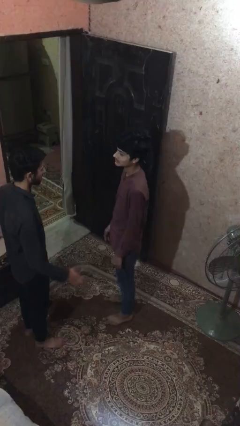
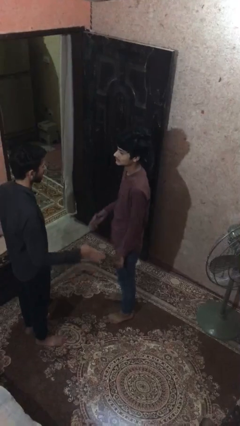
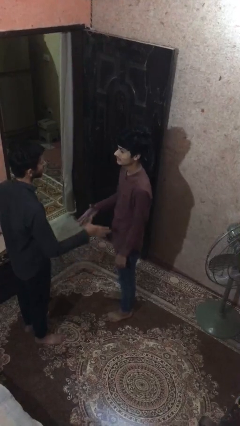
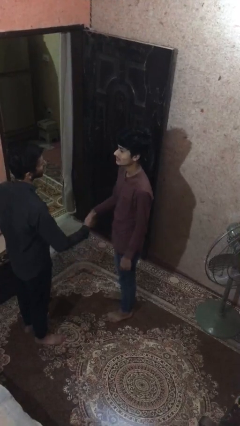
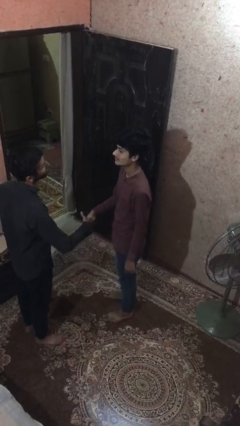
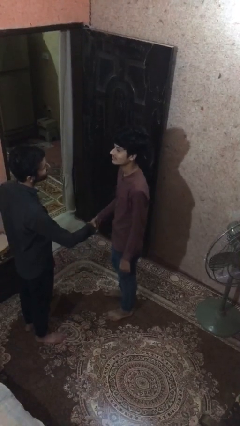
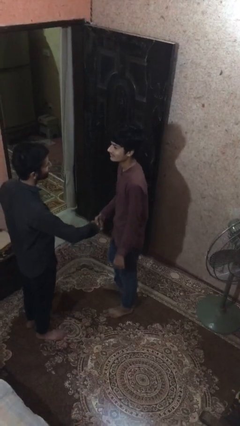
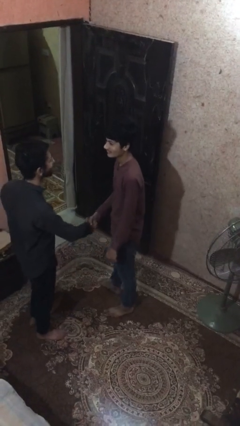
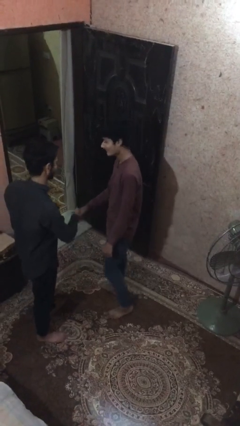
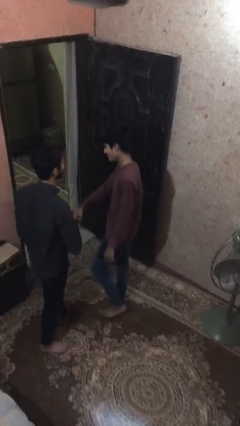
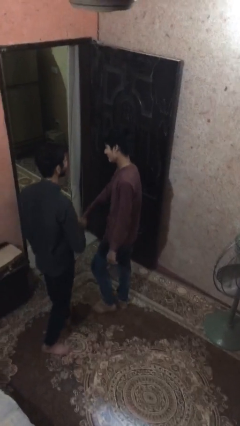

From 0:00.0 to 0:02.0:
person shakes hand

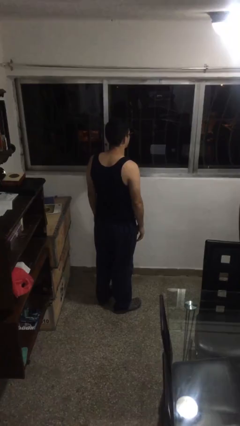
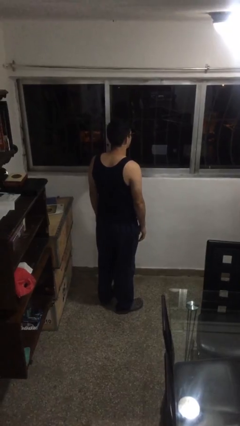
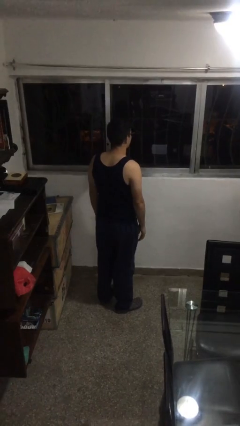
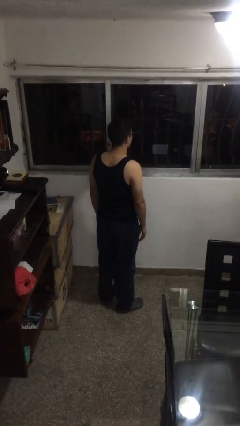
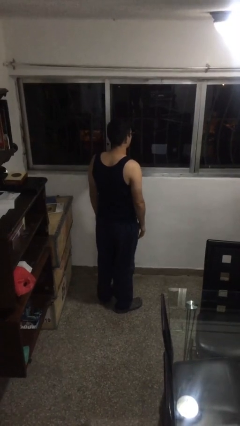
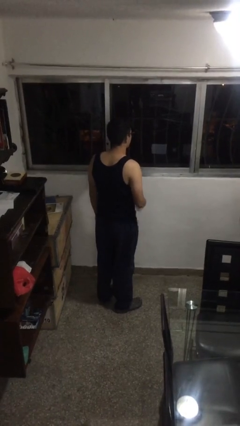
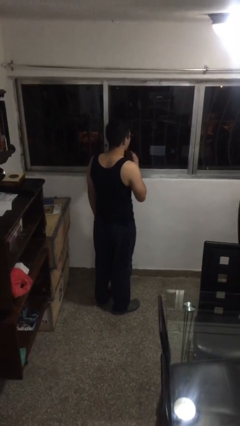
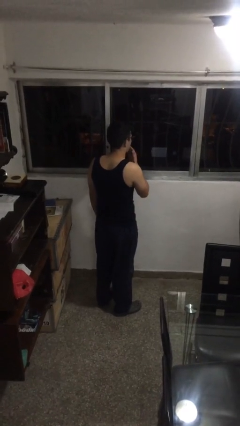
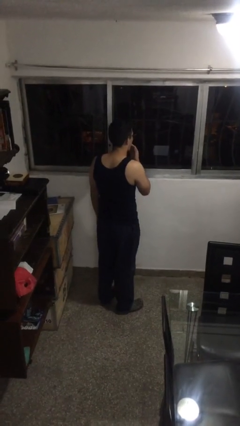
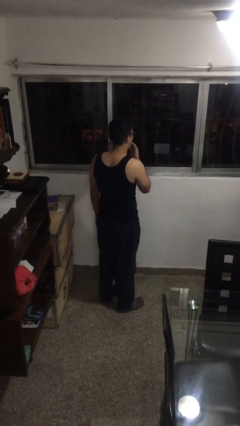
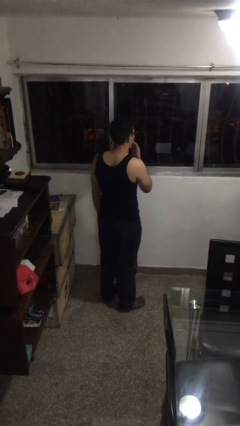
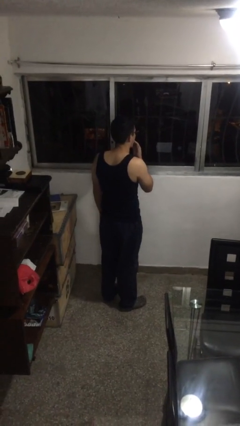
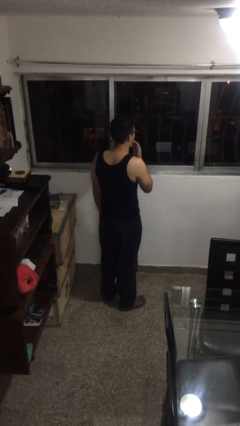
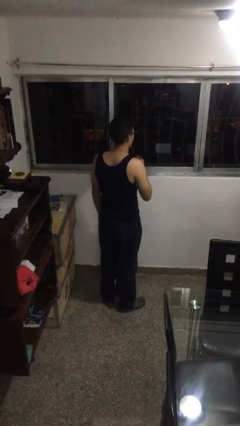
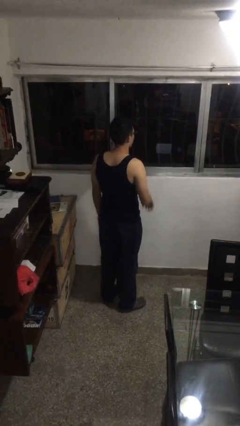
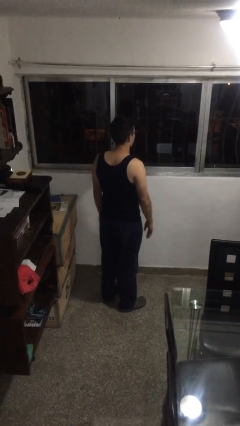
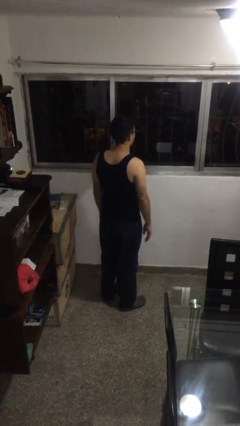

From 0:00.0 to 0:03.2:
person licks fingers

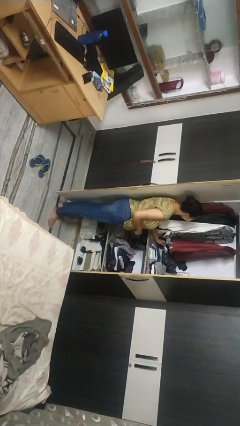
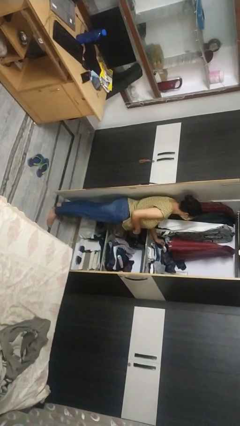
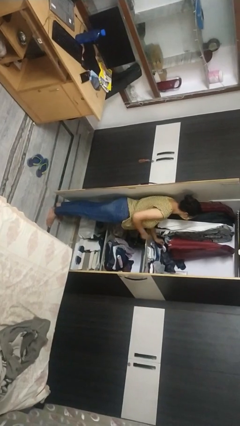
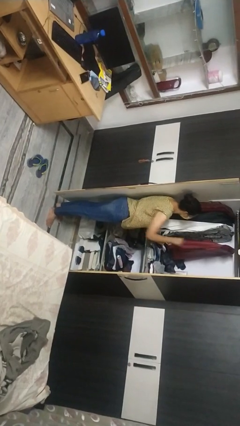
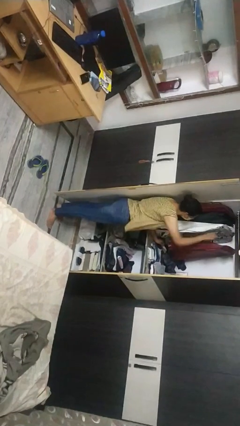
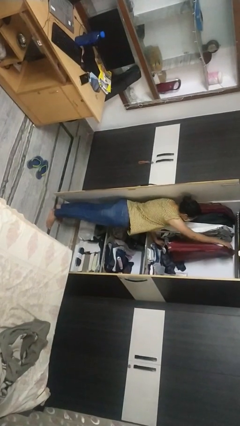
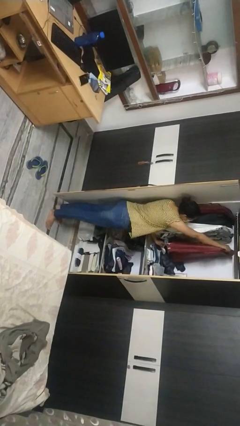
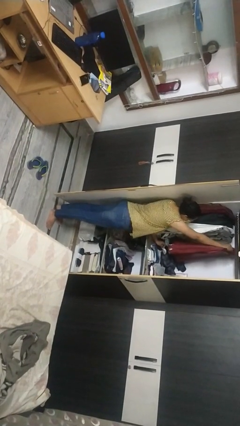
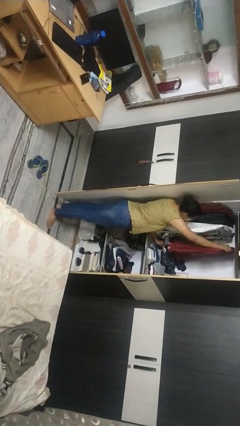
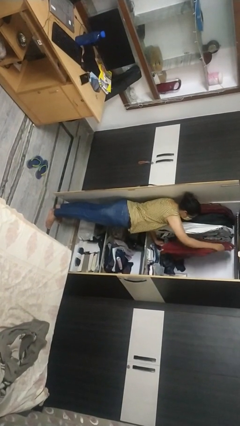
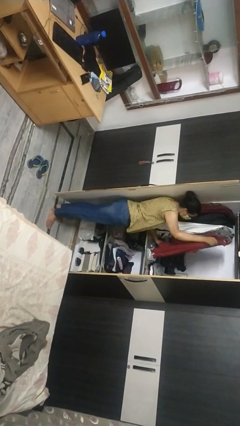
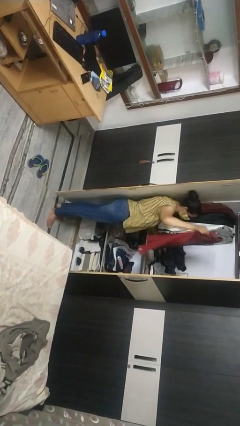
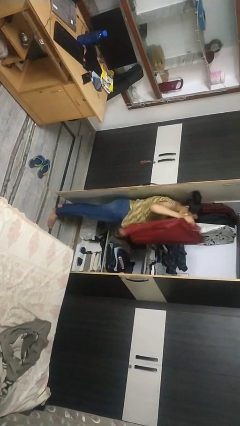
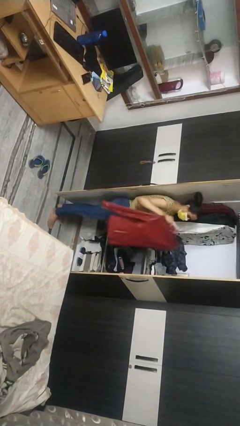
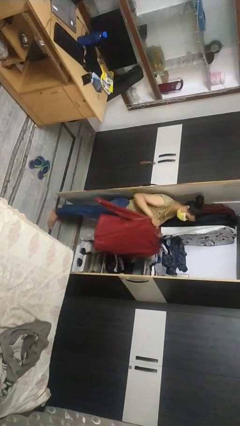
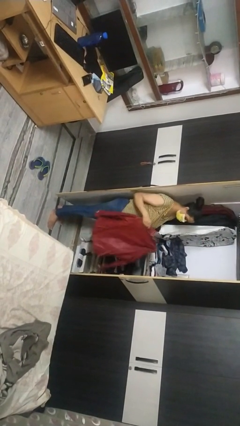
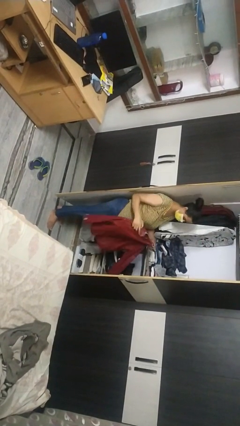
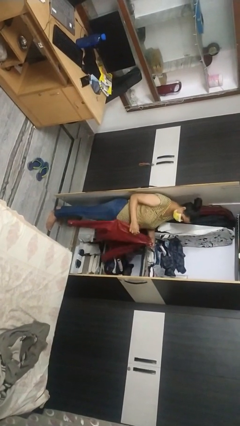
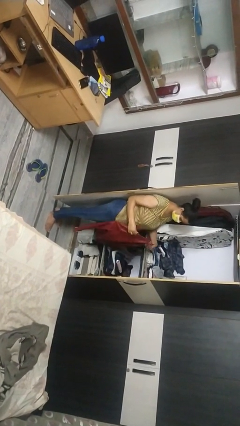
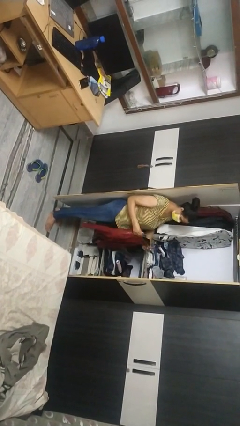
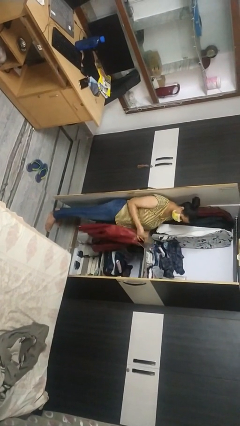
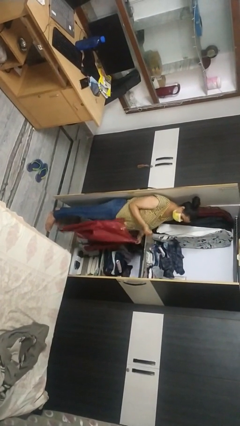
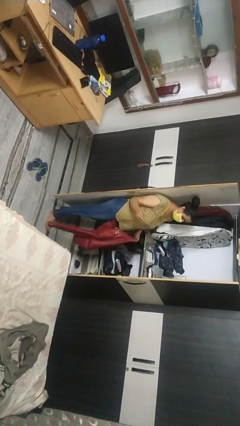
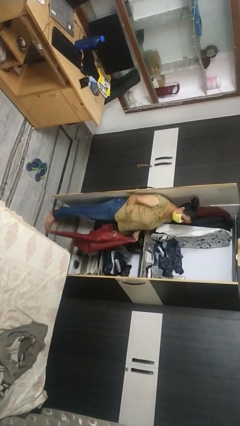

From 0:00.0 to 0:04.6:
person takes clothes from closet

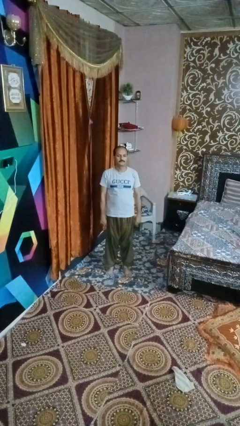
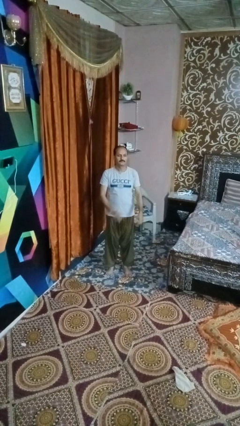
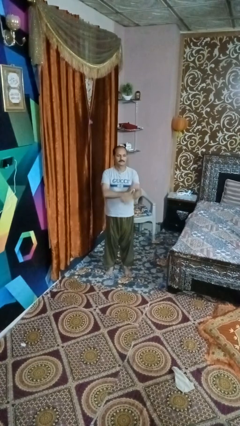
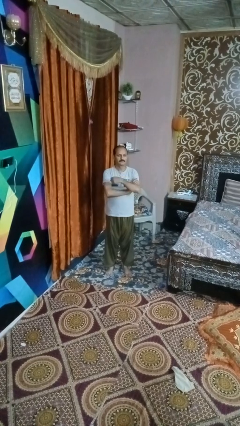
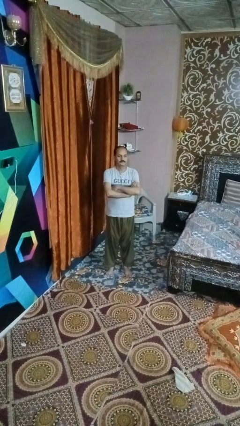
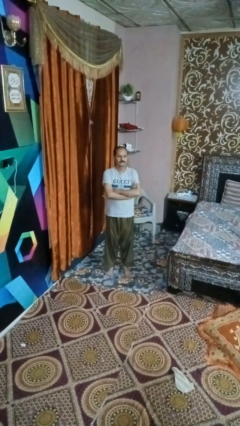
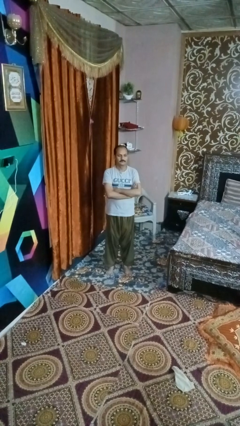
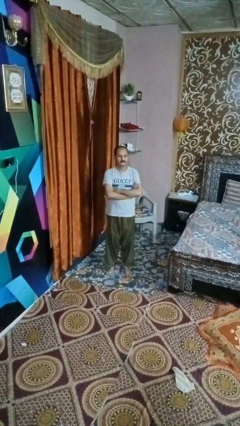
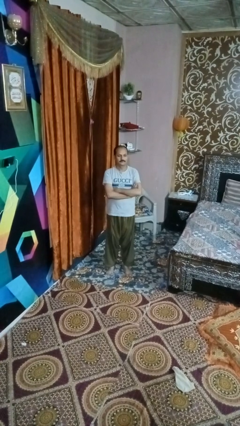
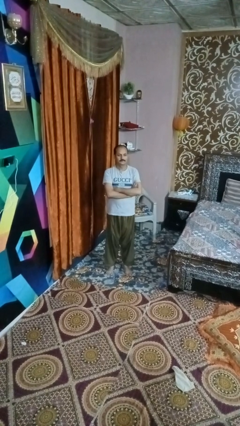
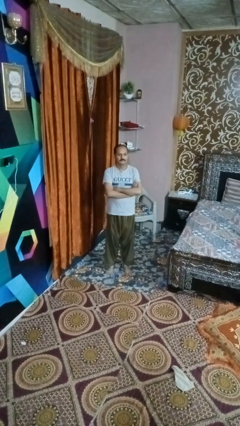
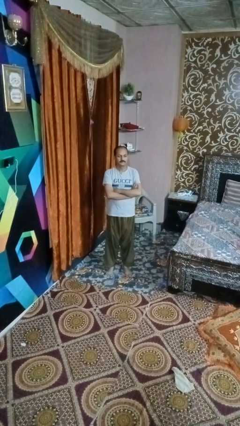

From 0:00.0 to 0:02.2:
person crosses arms

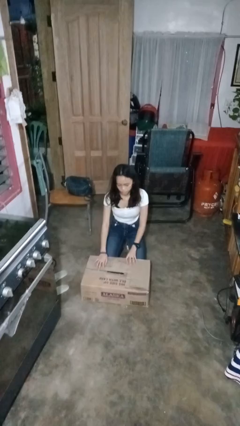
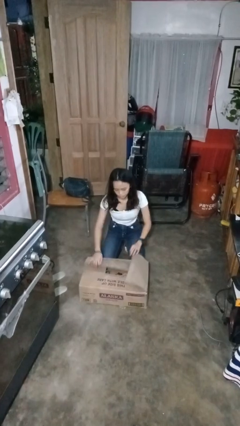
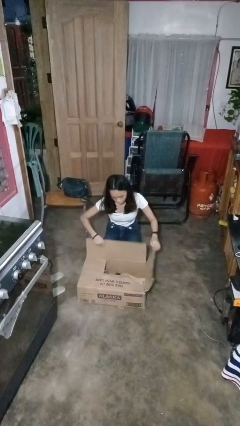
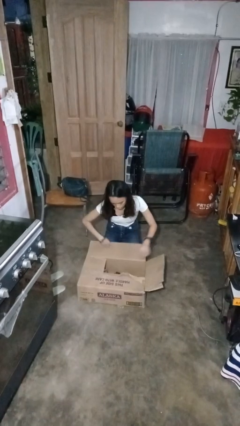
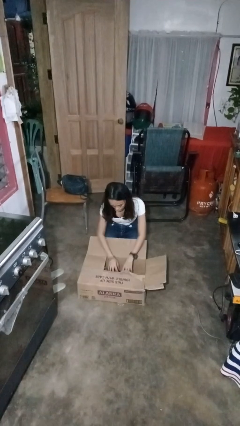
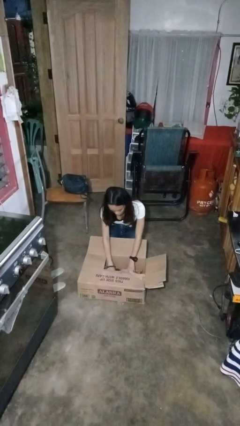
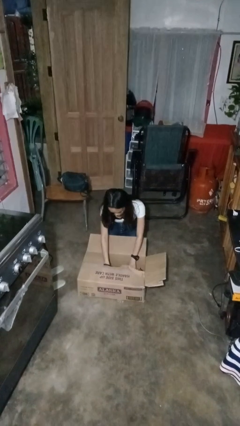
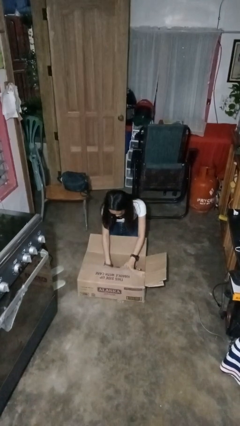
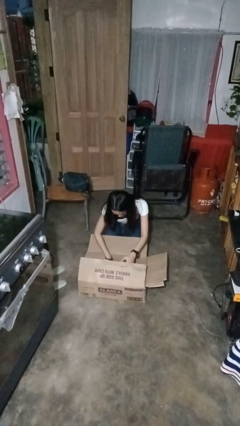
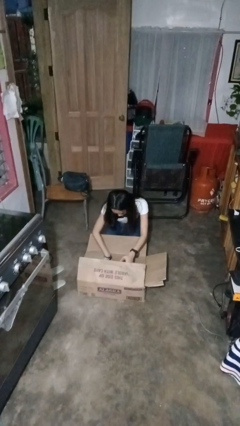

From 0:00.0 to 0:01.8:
person searches in box

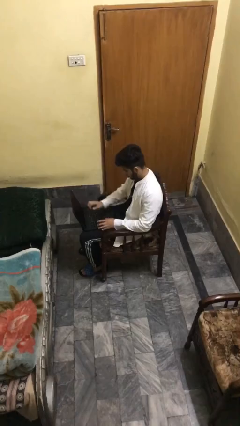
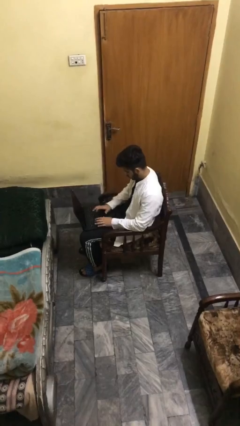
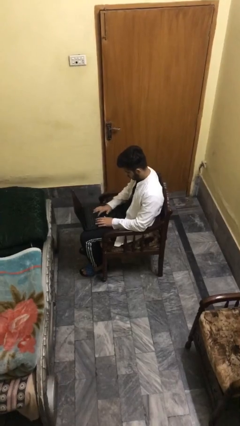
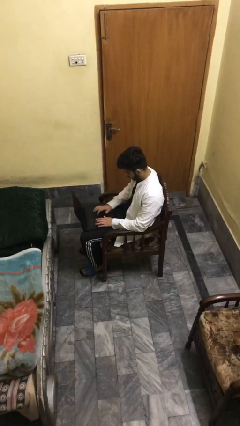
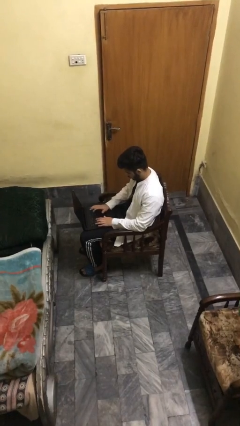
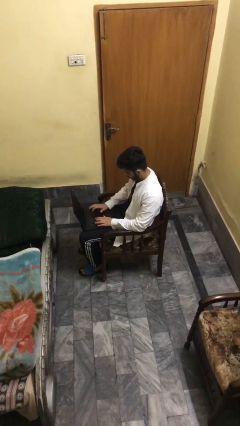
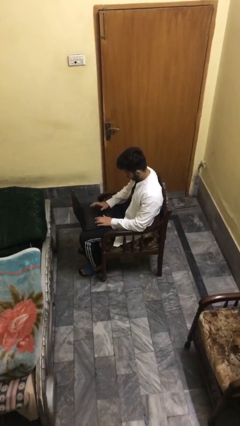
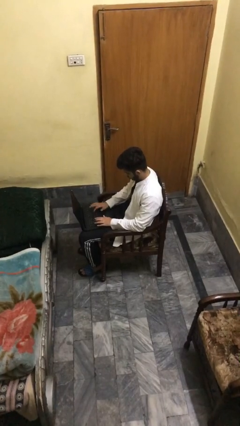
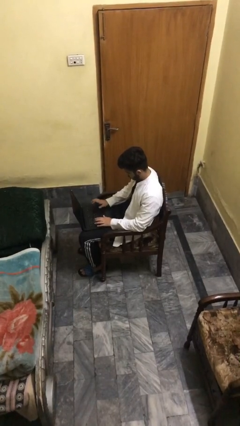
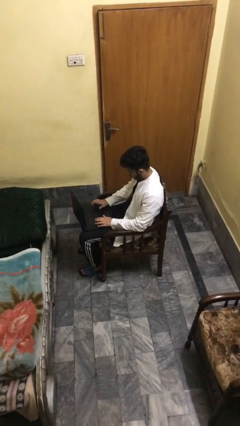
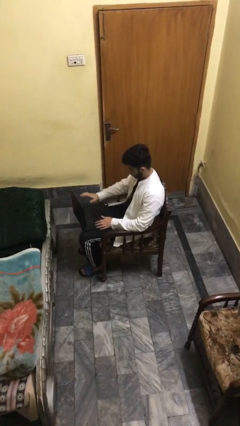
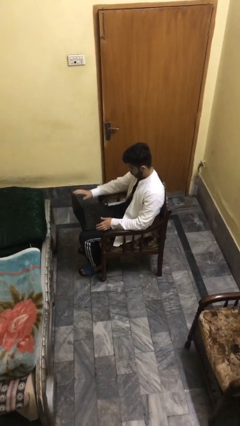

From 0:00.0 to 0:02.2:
person interacts with laptop

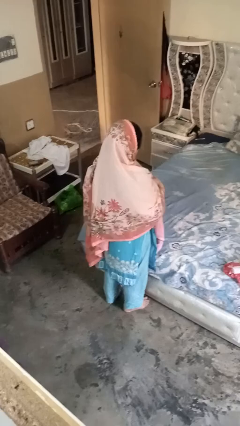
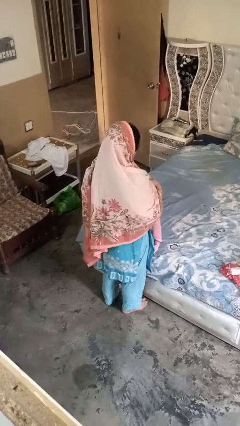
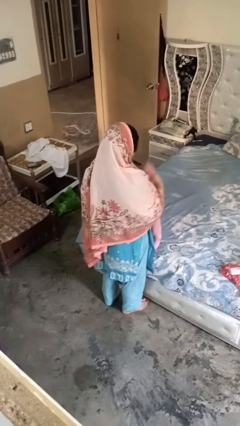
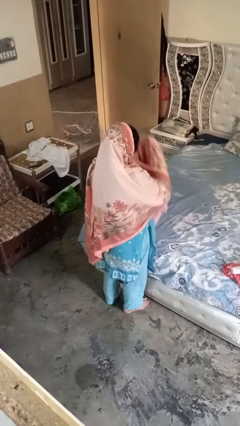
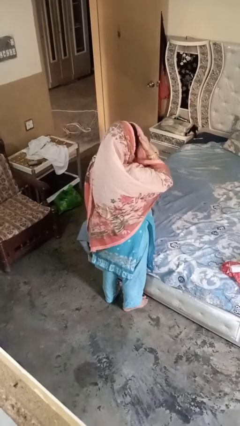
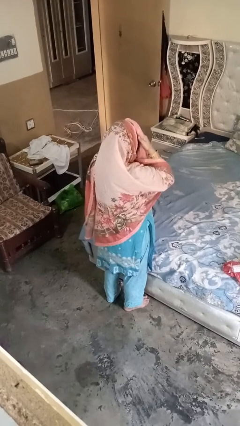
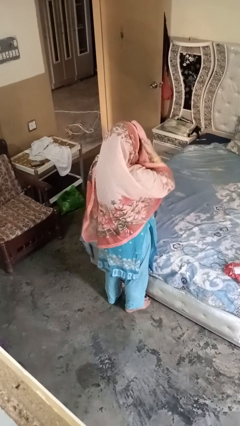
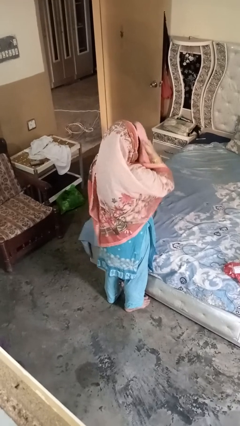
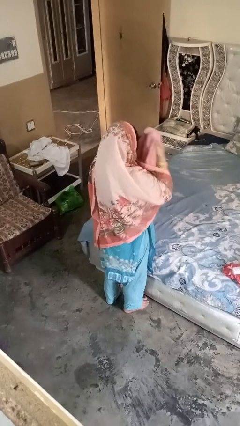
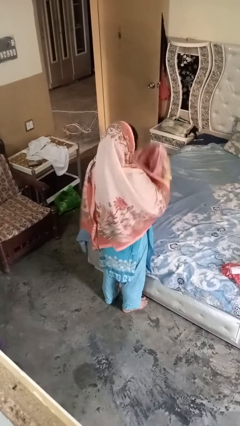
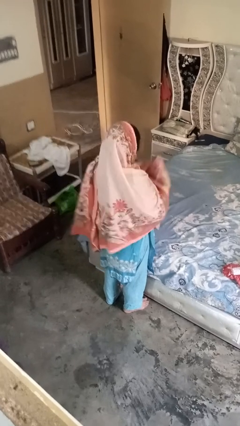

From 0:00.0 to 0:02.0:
person dries hair with towel
